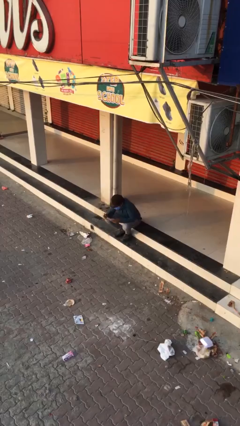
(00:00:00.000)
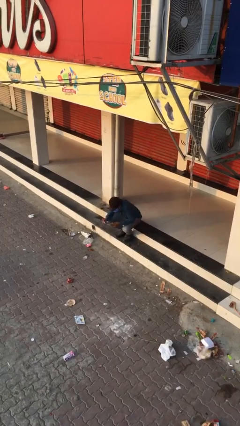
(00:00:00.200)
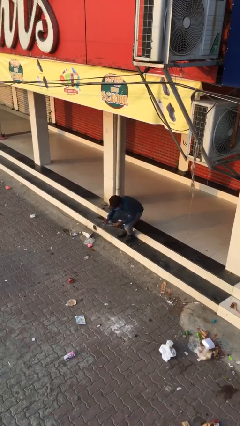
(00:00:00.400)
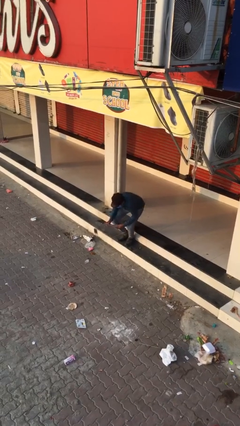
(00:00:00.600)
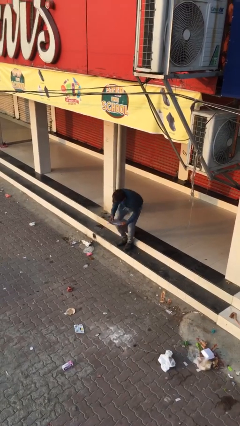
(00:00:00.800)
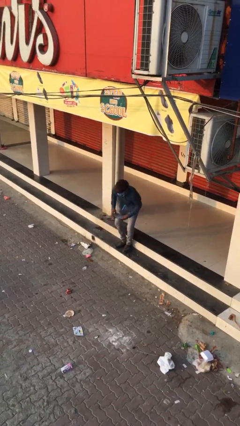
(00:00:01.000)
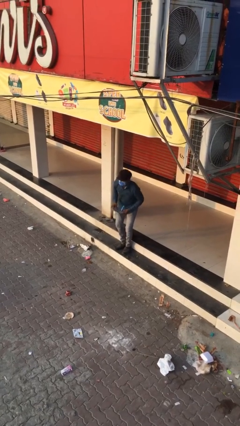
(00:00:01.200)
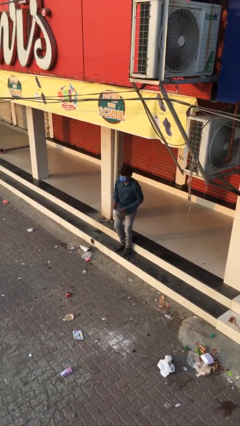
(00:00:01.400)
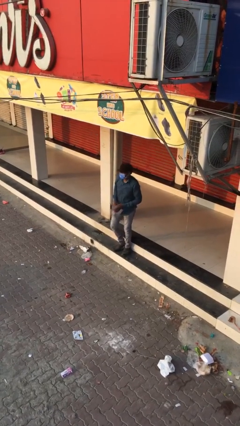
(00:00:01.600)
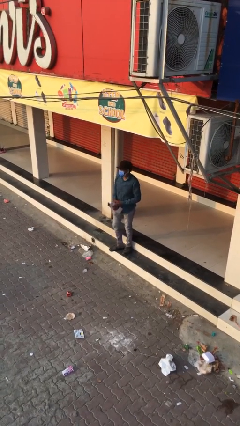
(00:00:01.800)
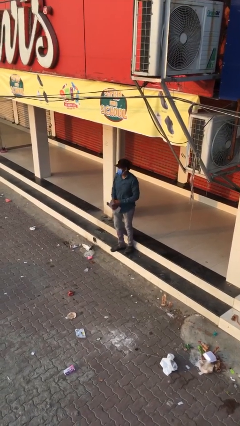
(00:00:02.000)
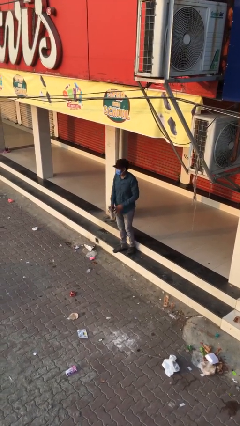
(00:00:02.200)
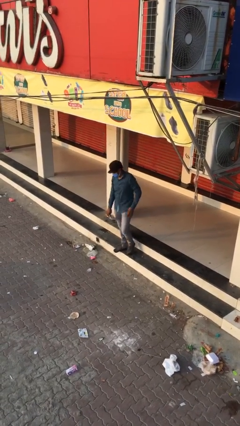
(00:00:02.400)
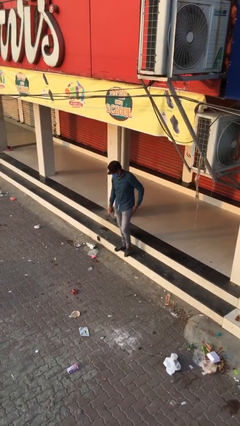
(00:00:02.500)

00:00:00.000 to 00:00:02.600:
person stands up

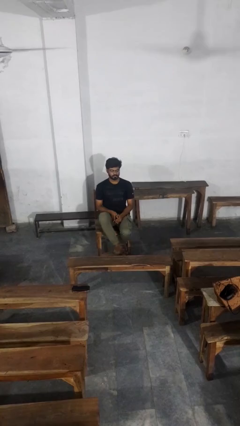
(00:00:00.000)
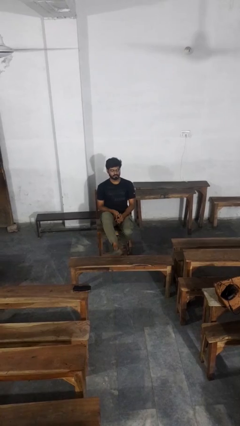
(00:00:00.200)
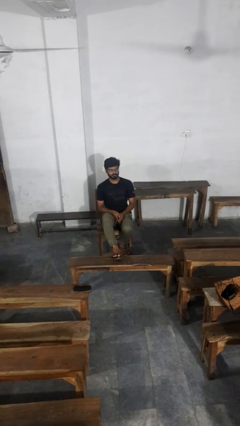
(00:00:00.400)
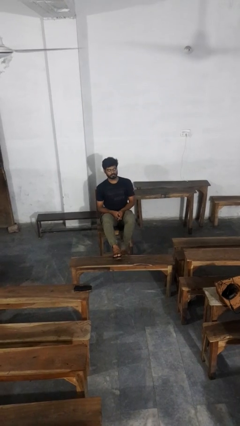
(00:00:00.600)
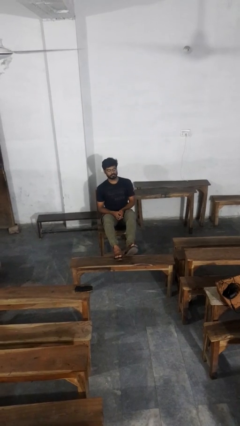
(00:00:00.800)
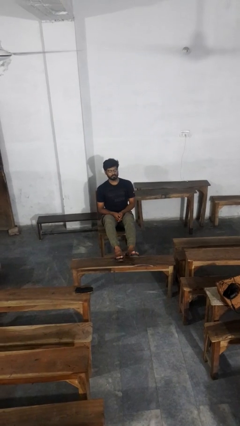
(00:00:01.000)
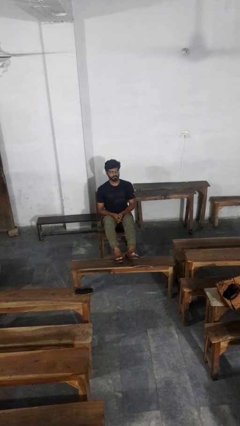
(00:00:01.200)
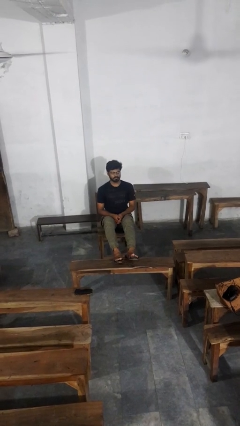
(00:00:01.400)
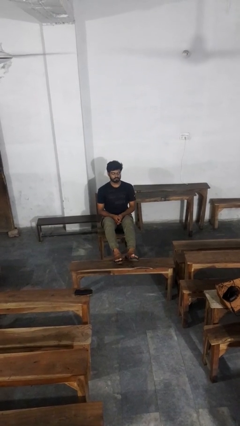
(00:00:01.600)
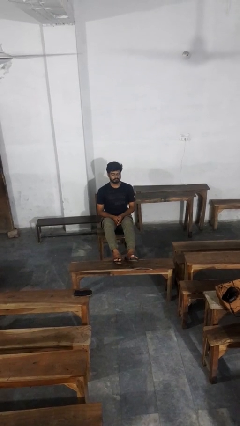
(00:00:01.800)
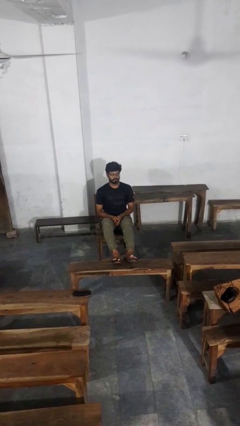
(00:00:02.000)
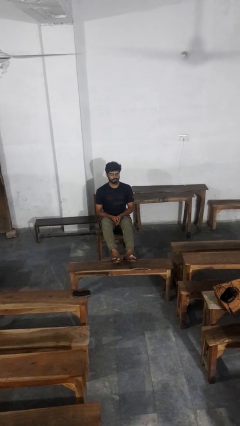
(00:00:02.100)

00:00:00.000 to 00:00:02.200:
person puts feet up

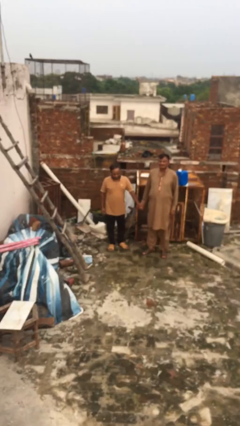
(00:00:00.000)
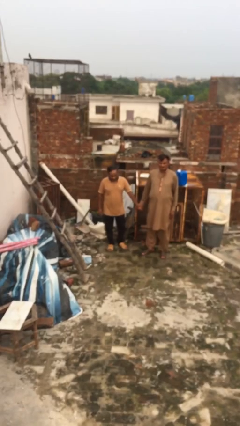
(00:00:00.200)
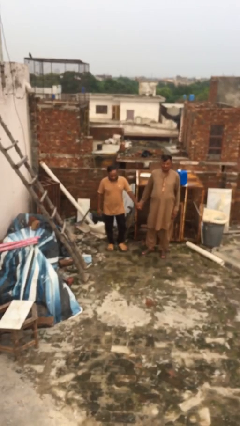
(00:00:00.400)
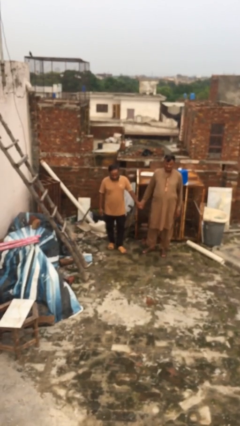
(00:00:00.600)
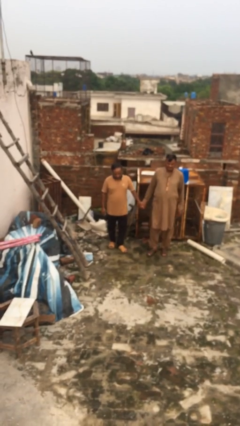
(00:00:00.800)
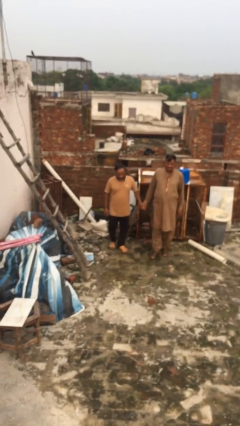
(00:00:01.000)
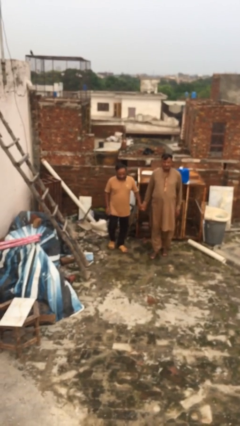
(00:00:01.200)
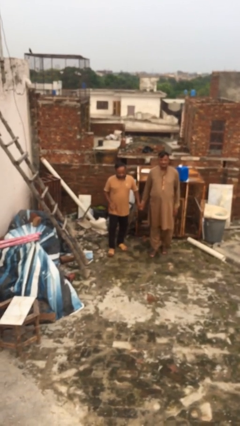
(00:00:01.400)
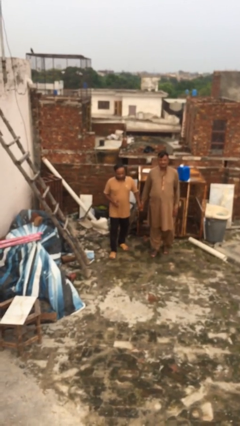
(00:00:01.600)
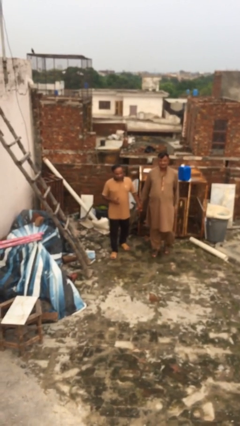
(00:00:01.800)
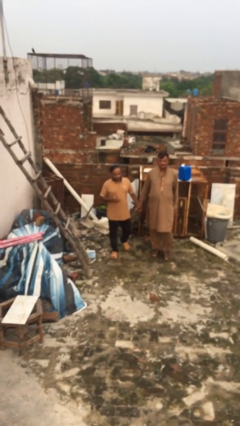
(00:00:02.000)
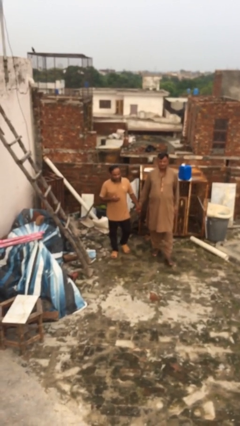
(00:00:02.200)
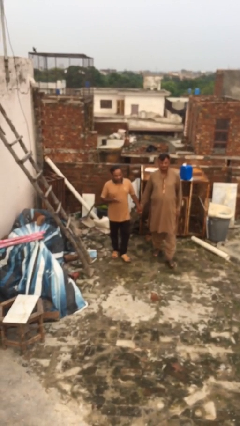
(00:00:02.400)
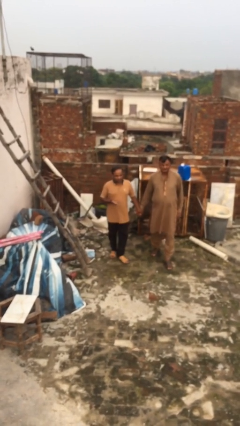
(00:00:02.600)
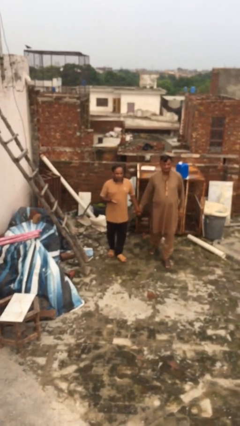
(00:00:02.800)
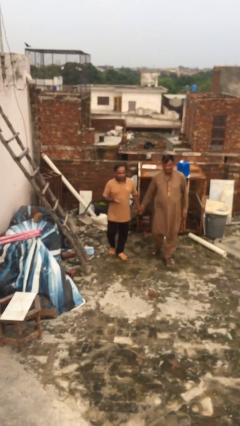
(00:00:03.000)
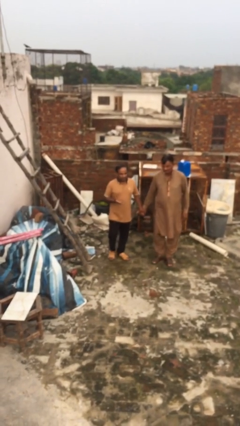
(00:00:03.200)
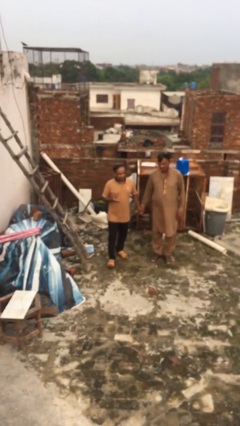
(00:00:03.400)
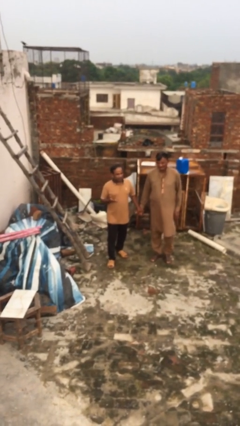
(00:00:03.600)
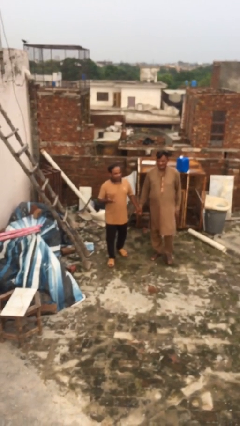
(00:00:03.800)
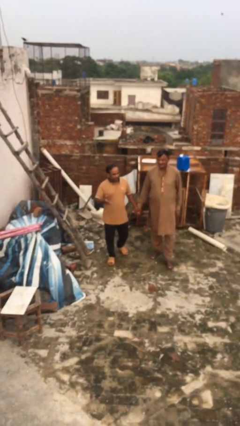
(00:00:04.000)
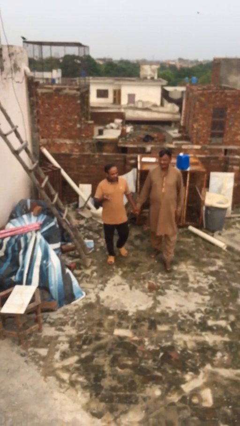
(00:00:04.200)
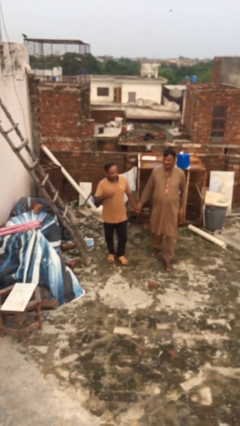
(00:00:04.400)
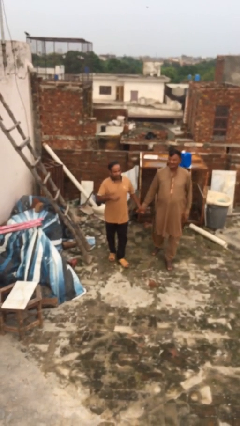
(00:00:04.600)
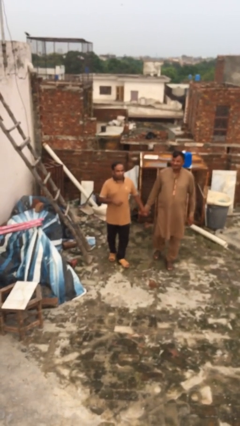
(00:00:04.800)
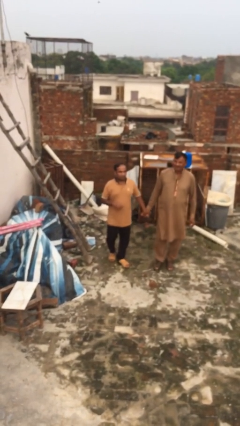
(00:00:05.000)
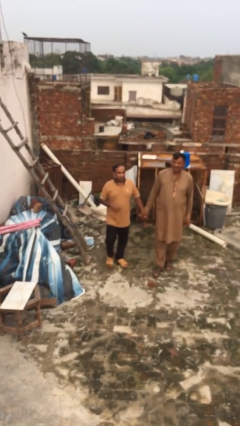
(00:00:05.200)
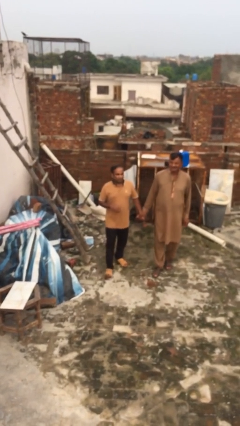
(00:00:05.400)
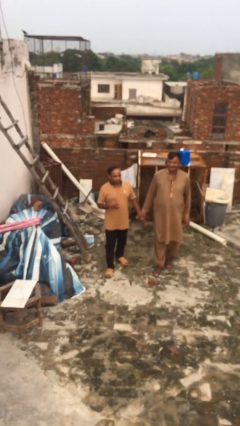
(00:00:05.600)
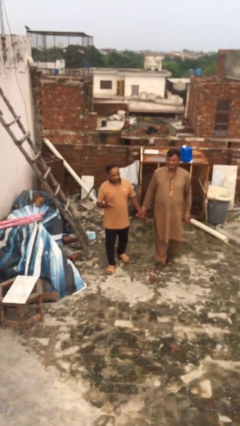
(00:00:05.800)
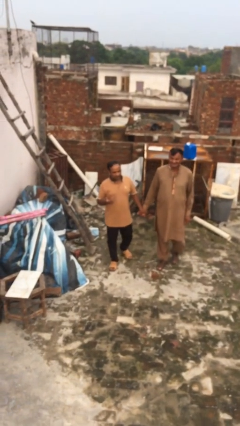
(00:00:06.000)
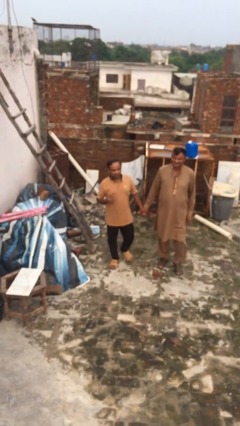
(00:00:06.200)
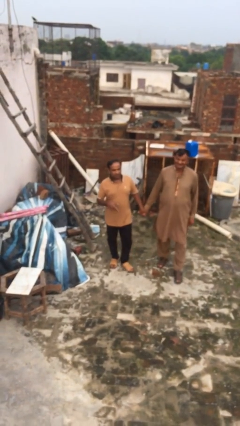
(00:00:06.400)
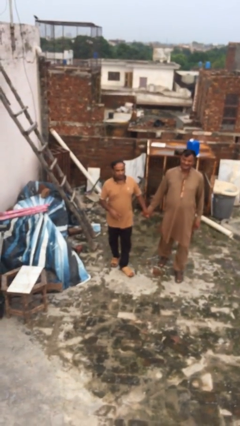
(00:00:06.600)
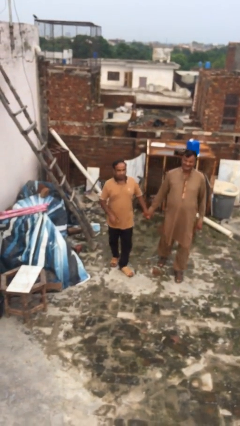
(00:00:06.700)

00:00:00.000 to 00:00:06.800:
person holds hand

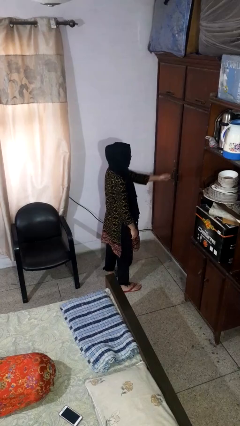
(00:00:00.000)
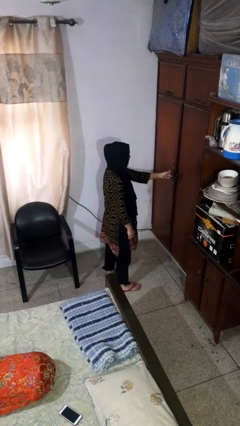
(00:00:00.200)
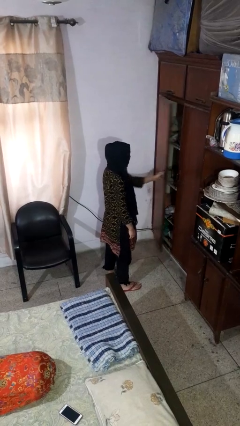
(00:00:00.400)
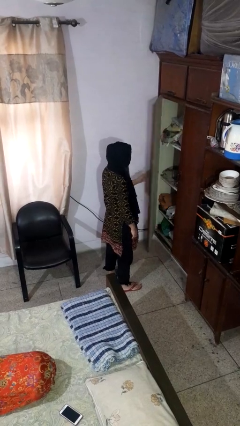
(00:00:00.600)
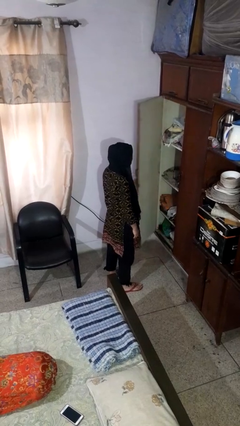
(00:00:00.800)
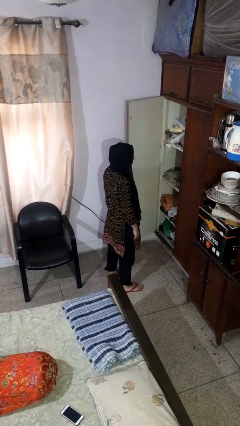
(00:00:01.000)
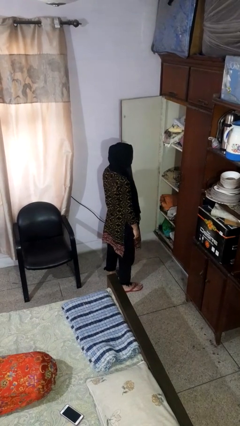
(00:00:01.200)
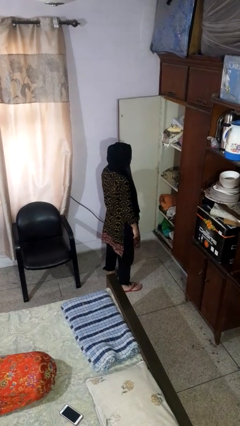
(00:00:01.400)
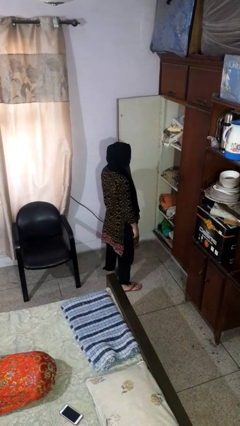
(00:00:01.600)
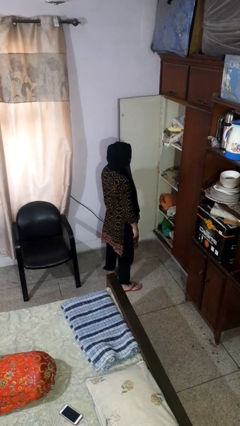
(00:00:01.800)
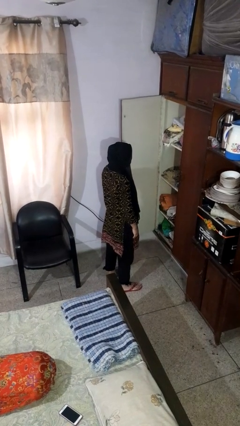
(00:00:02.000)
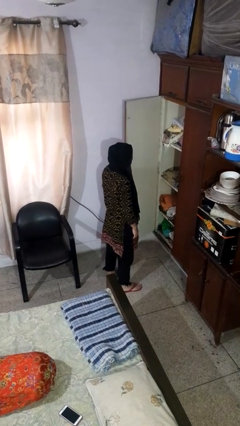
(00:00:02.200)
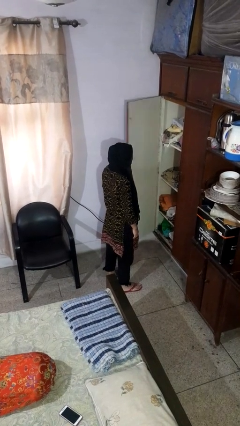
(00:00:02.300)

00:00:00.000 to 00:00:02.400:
person opens closet door

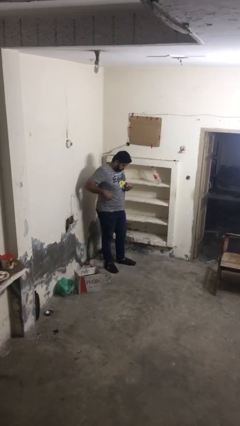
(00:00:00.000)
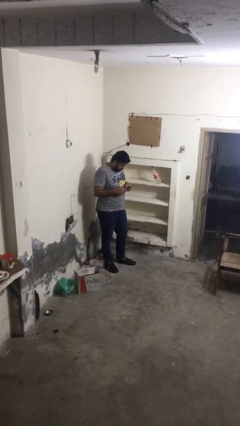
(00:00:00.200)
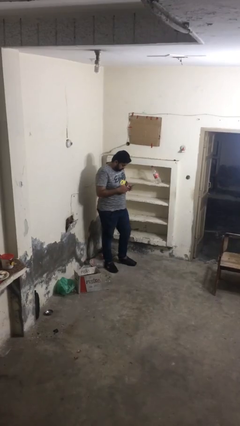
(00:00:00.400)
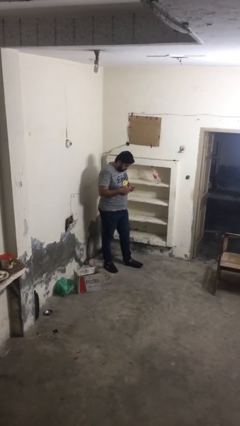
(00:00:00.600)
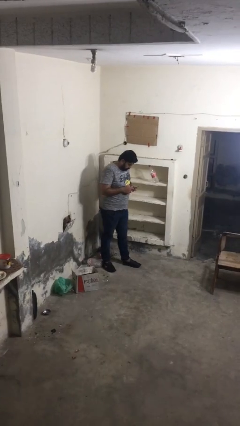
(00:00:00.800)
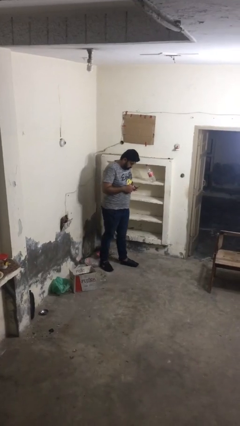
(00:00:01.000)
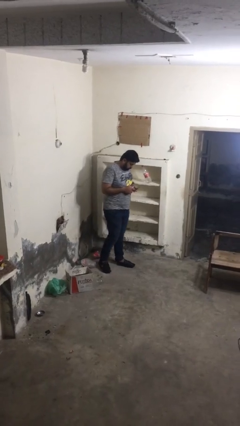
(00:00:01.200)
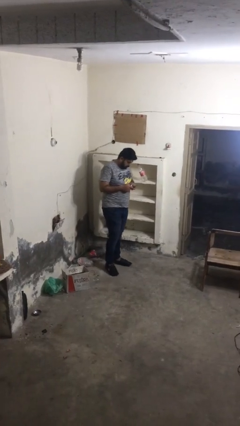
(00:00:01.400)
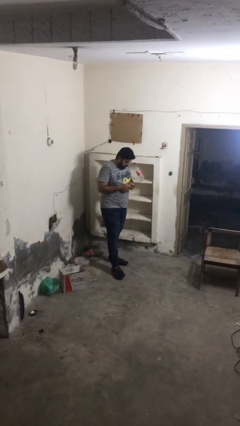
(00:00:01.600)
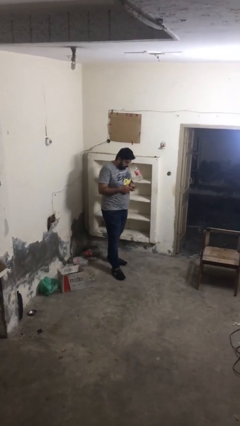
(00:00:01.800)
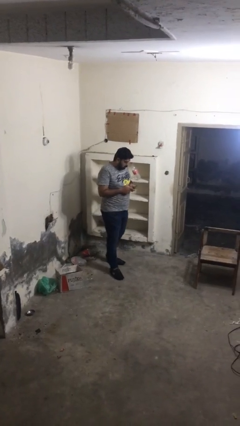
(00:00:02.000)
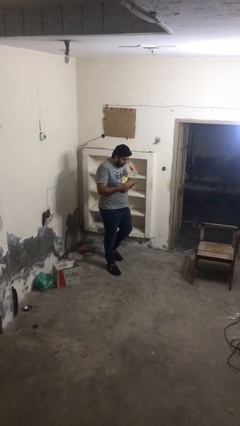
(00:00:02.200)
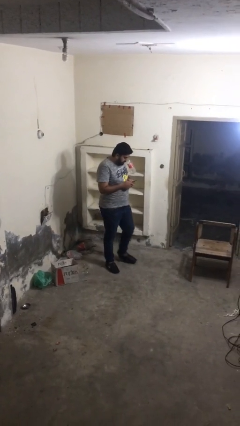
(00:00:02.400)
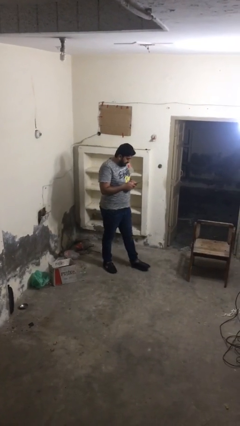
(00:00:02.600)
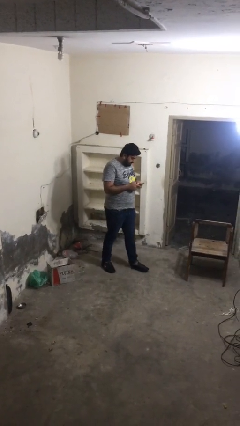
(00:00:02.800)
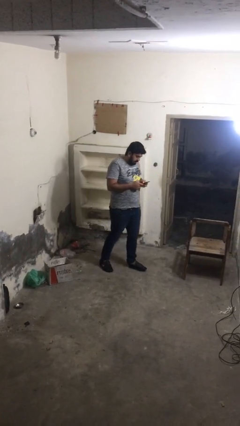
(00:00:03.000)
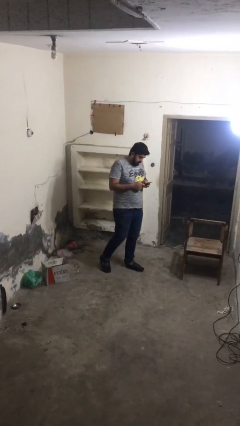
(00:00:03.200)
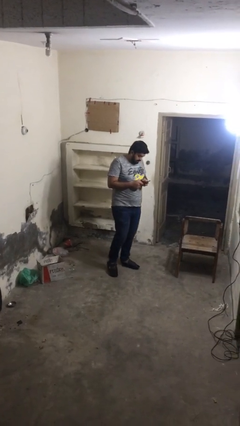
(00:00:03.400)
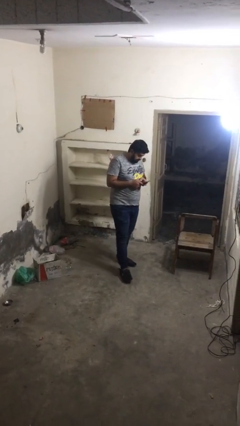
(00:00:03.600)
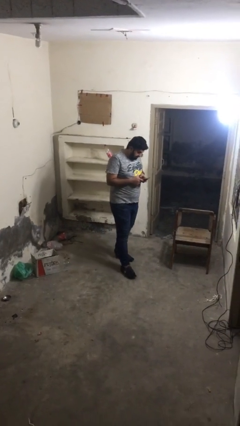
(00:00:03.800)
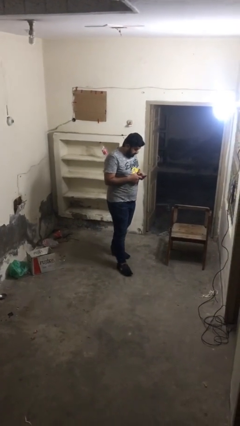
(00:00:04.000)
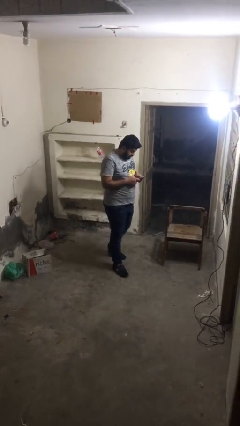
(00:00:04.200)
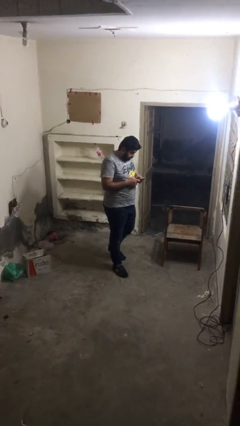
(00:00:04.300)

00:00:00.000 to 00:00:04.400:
person texts on phone
